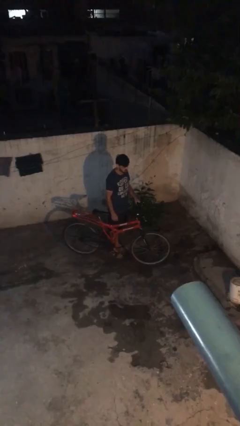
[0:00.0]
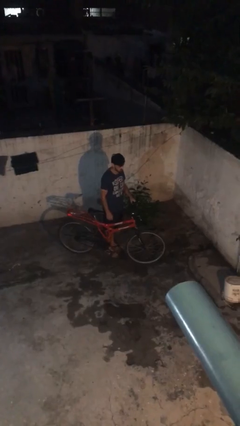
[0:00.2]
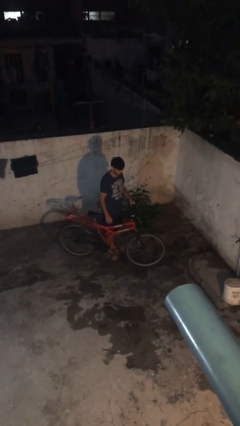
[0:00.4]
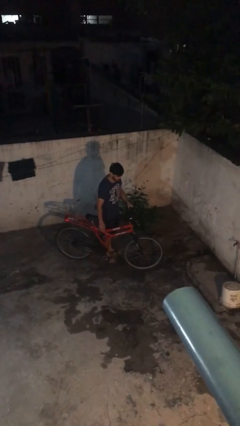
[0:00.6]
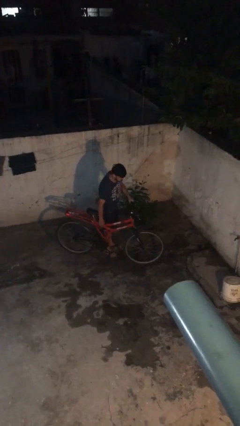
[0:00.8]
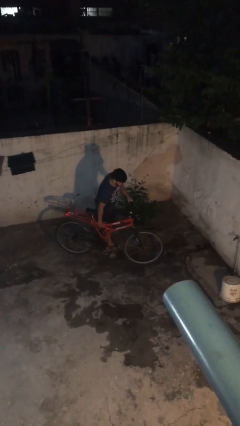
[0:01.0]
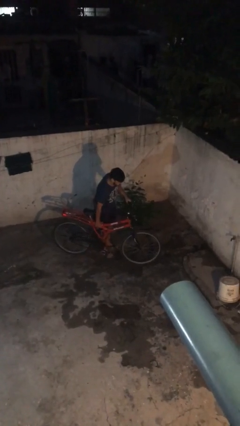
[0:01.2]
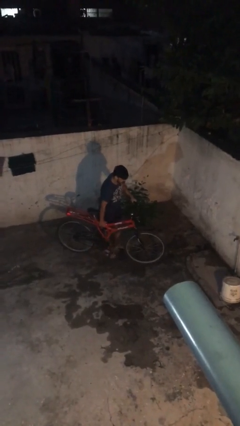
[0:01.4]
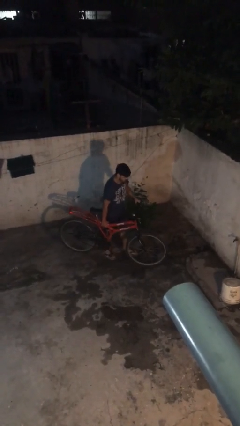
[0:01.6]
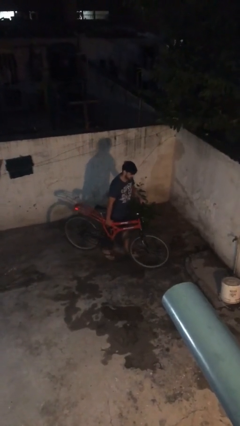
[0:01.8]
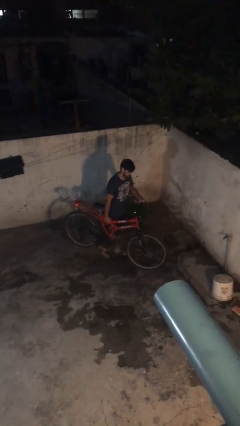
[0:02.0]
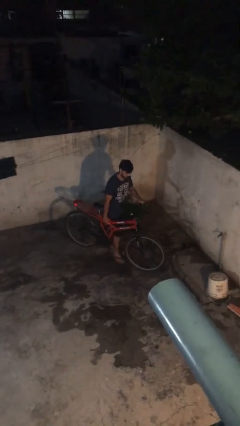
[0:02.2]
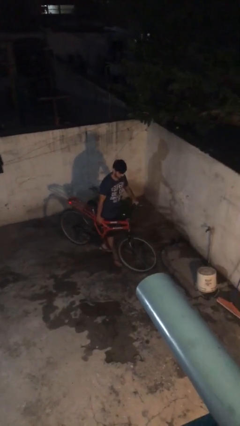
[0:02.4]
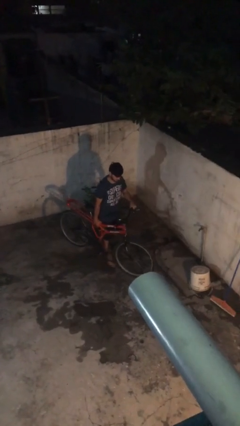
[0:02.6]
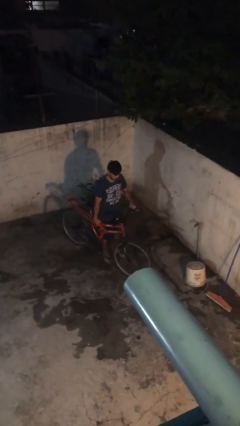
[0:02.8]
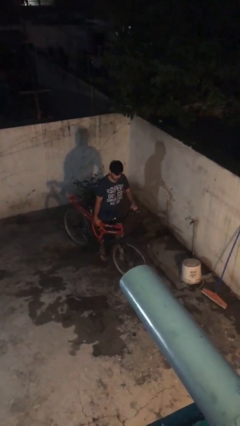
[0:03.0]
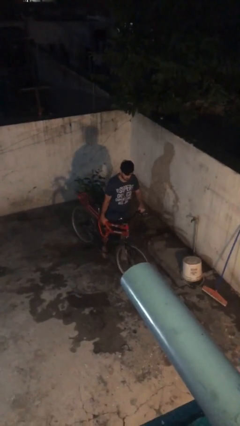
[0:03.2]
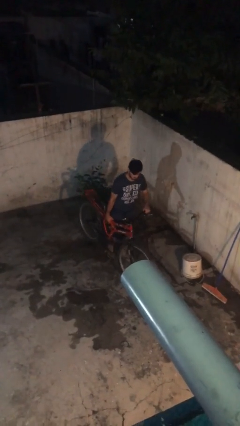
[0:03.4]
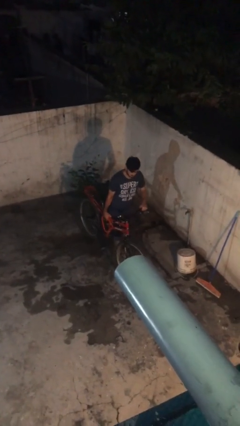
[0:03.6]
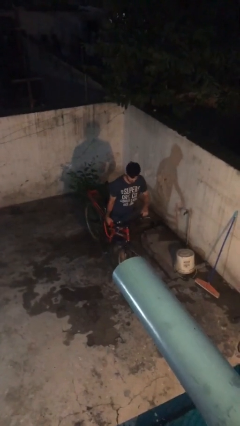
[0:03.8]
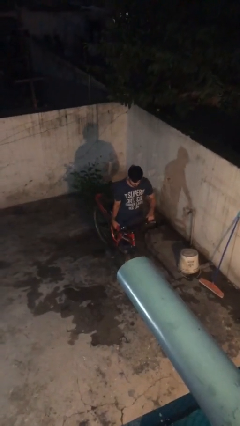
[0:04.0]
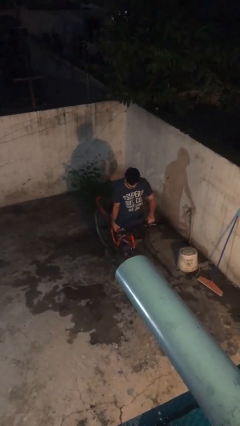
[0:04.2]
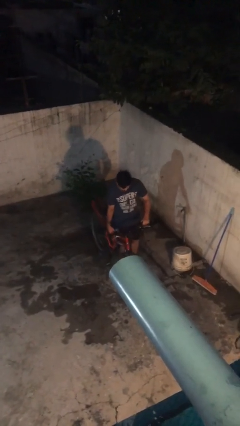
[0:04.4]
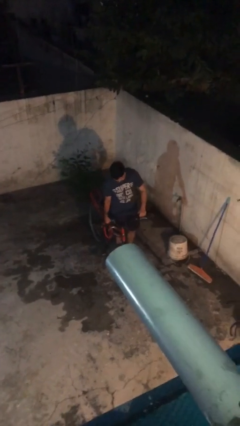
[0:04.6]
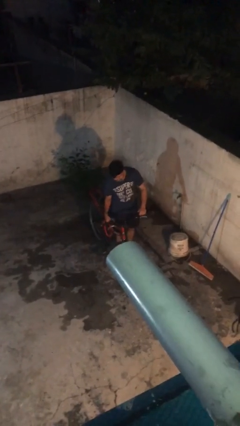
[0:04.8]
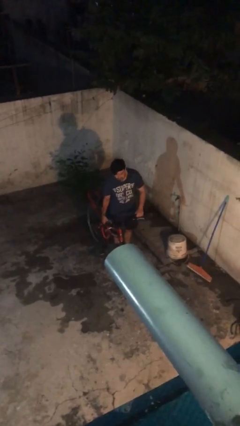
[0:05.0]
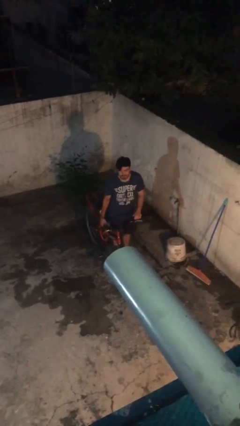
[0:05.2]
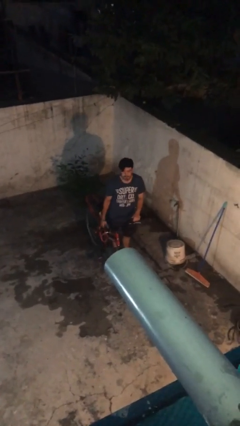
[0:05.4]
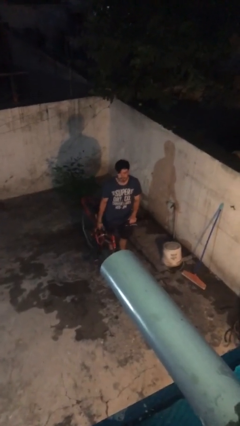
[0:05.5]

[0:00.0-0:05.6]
person carries bicycle

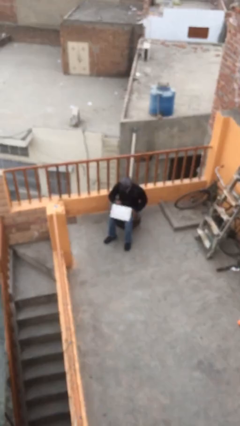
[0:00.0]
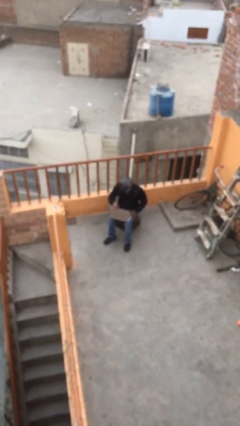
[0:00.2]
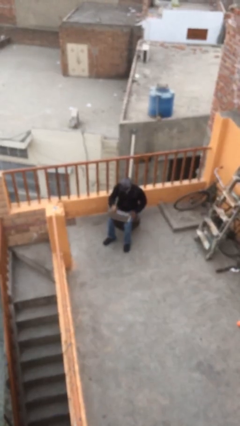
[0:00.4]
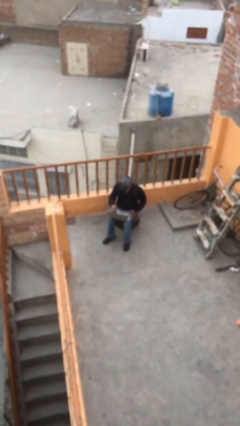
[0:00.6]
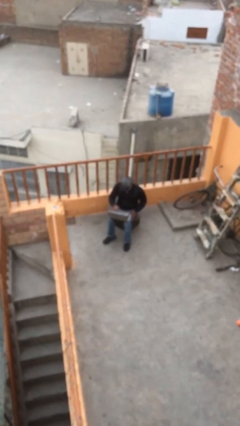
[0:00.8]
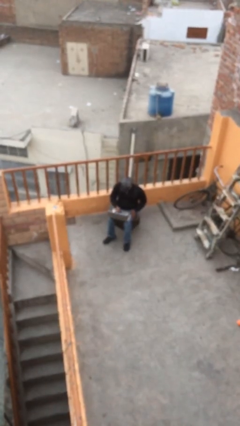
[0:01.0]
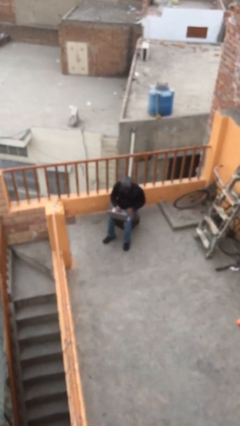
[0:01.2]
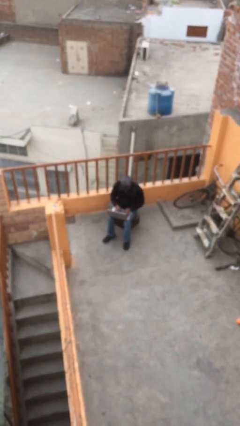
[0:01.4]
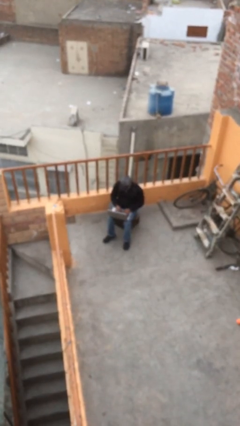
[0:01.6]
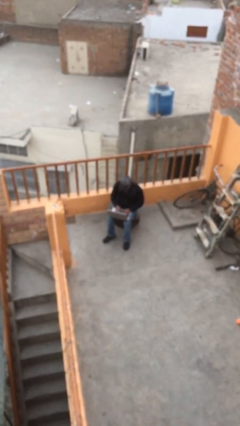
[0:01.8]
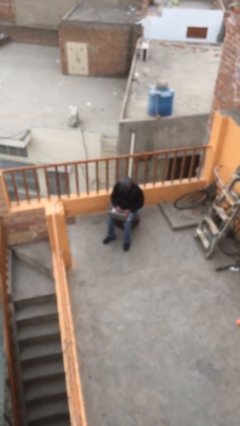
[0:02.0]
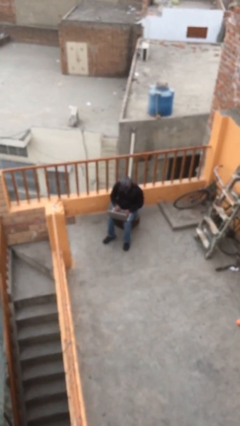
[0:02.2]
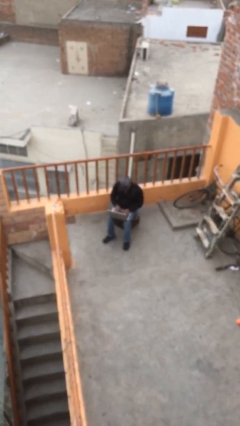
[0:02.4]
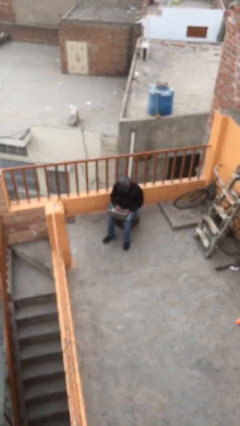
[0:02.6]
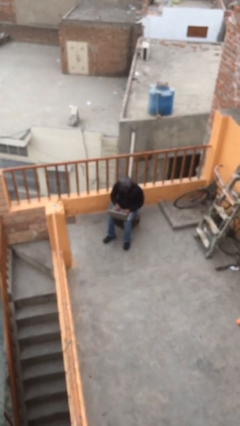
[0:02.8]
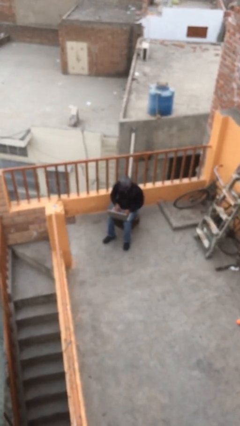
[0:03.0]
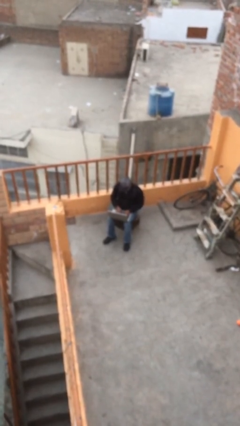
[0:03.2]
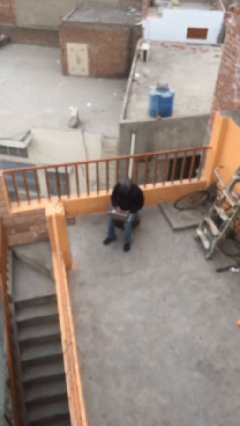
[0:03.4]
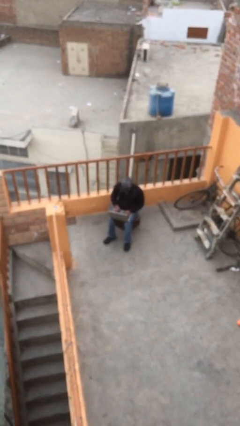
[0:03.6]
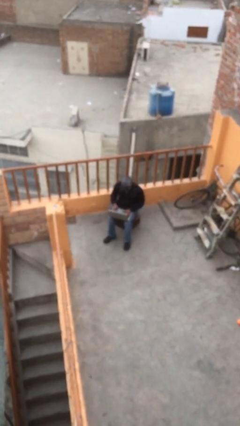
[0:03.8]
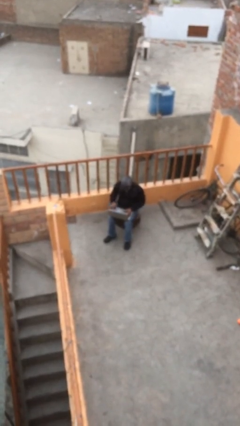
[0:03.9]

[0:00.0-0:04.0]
person interacts with laptop

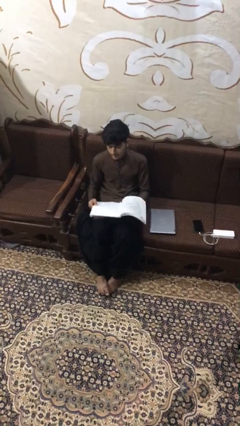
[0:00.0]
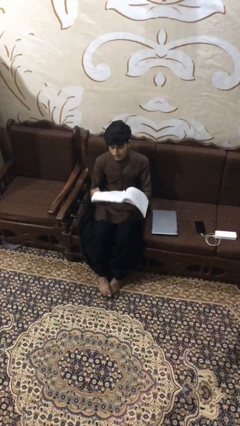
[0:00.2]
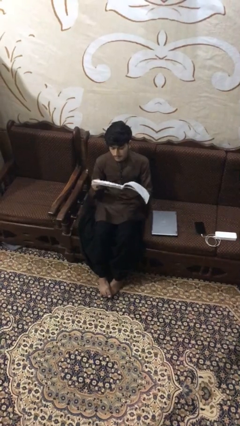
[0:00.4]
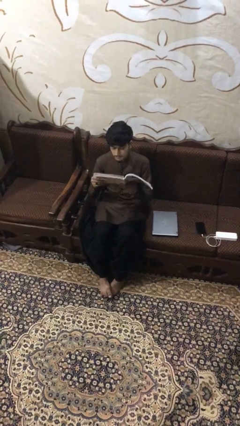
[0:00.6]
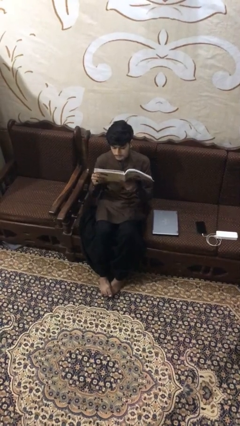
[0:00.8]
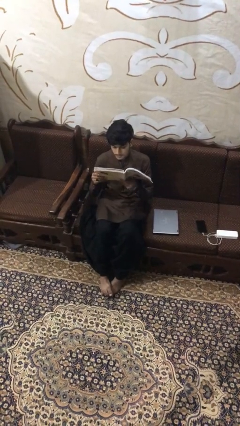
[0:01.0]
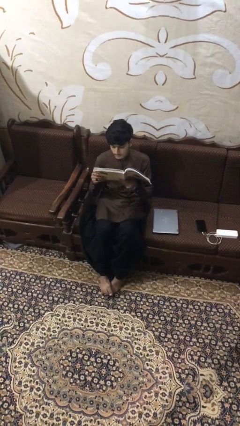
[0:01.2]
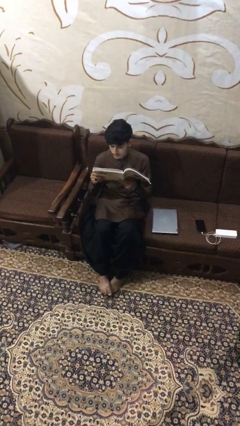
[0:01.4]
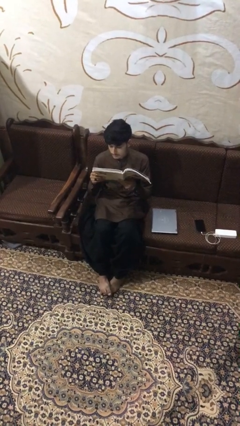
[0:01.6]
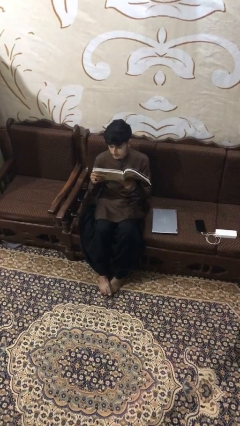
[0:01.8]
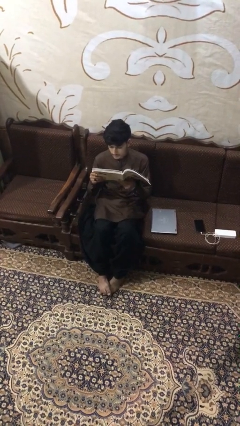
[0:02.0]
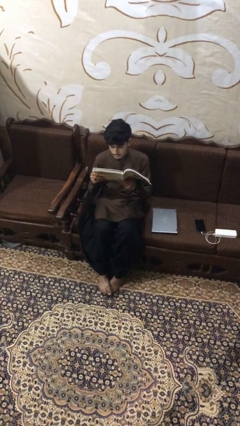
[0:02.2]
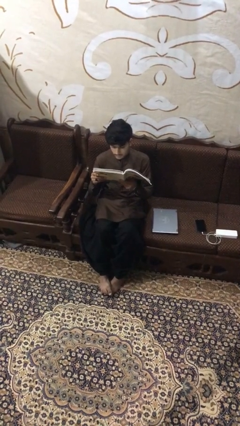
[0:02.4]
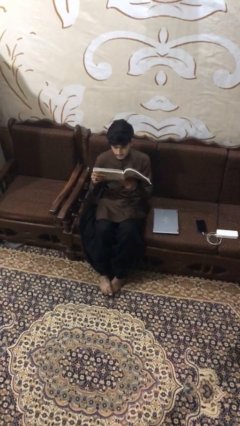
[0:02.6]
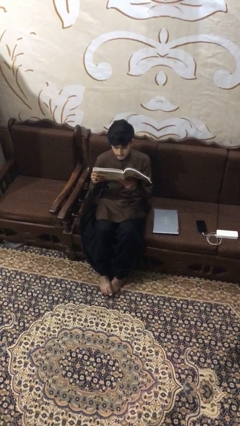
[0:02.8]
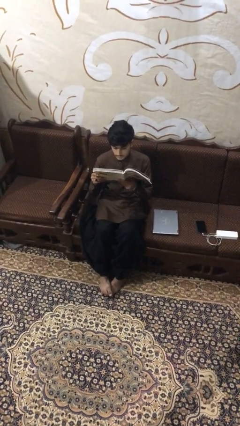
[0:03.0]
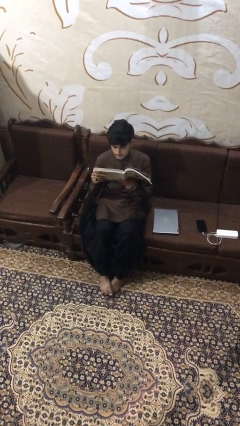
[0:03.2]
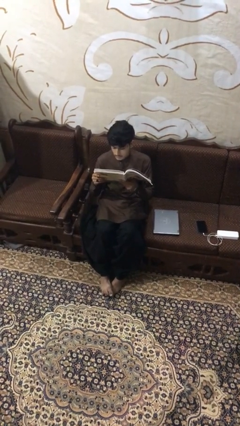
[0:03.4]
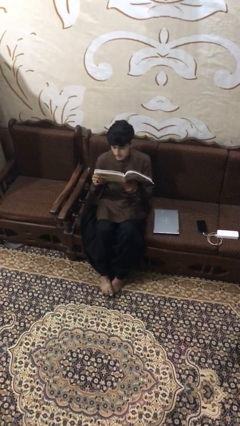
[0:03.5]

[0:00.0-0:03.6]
person reads document

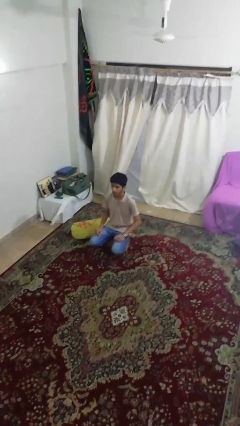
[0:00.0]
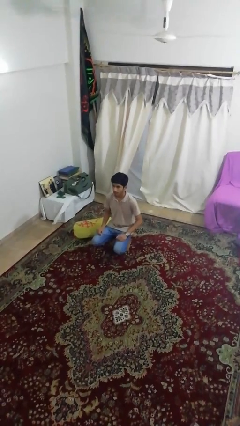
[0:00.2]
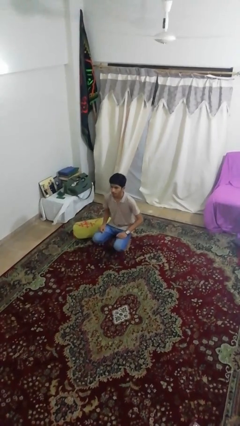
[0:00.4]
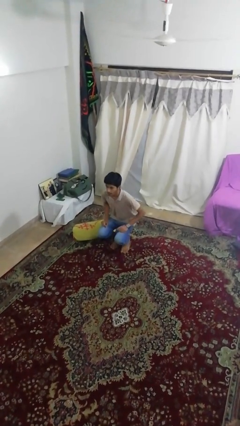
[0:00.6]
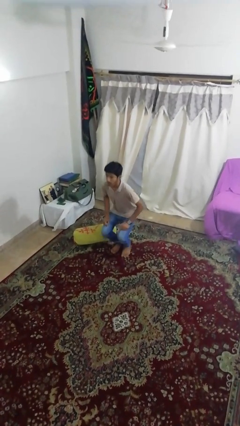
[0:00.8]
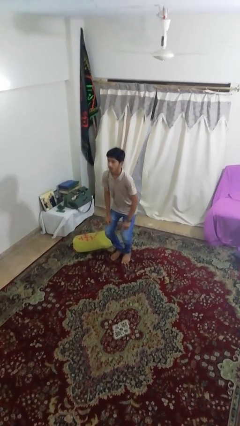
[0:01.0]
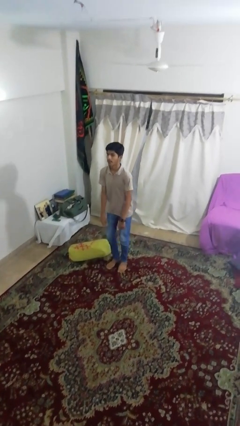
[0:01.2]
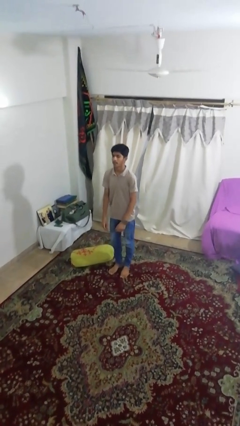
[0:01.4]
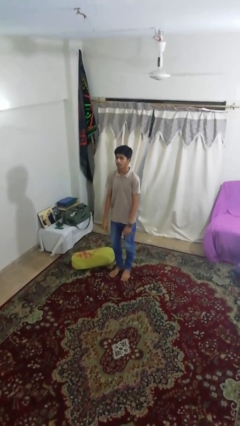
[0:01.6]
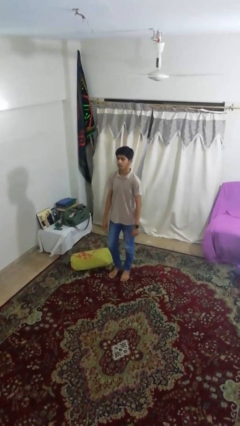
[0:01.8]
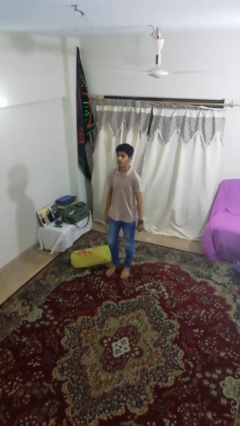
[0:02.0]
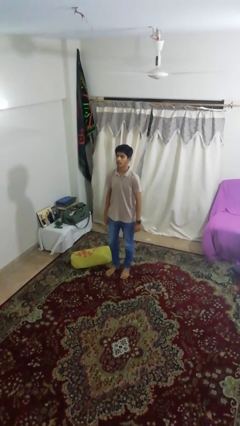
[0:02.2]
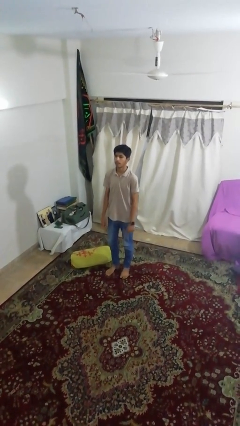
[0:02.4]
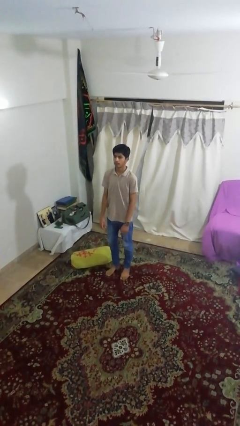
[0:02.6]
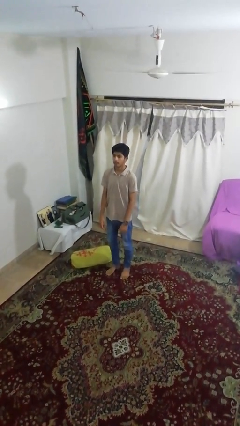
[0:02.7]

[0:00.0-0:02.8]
person stands up

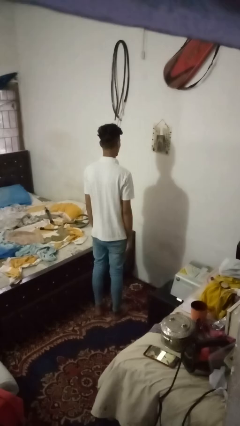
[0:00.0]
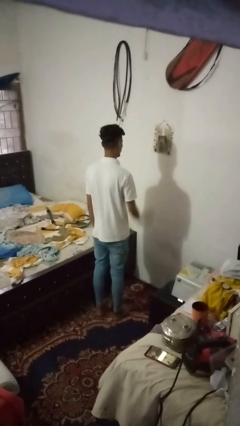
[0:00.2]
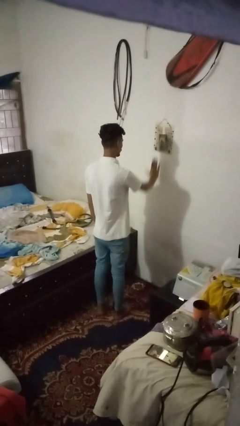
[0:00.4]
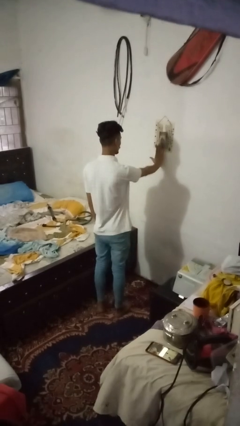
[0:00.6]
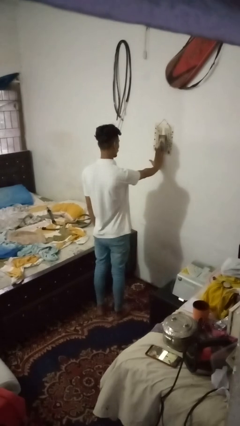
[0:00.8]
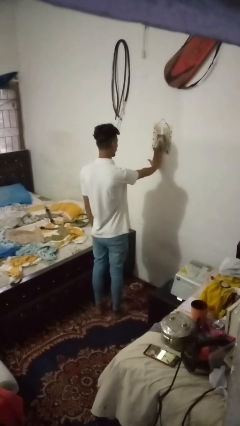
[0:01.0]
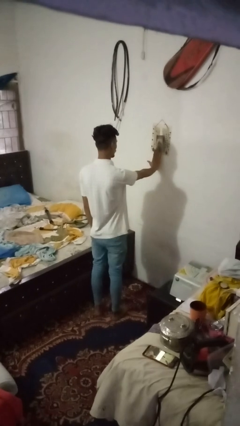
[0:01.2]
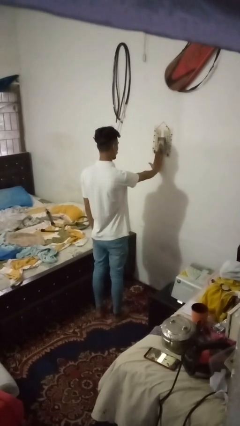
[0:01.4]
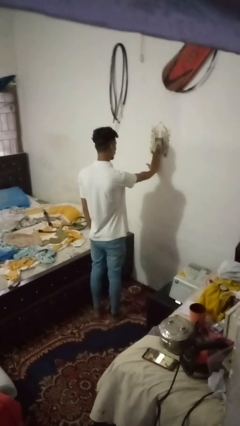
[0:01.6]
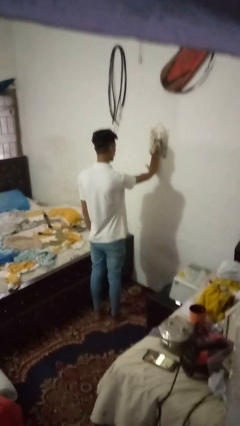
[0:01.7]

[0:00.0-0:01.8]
person gestures stop
